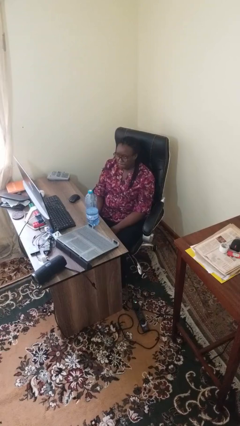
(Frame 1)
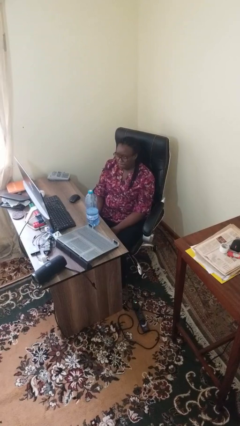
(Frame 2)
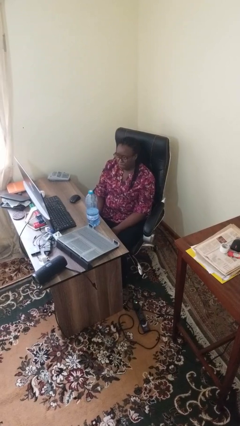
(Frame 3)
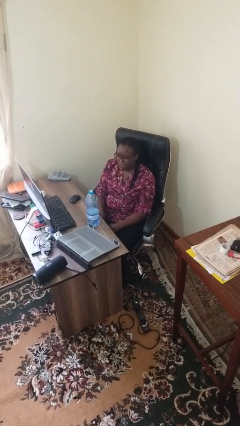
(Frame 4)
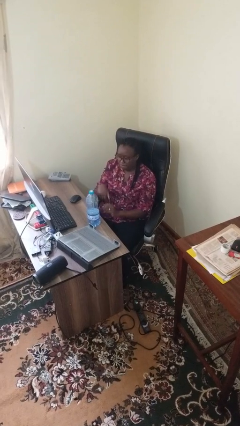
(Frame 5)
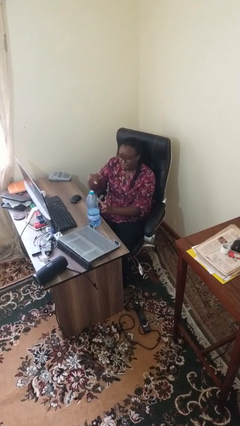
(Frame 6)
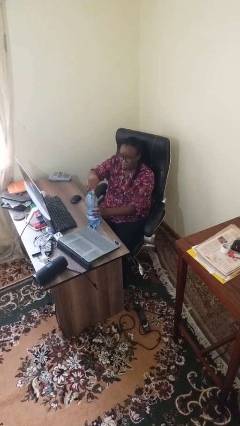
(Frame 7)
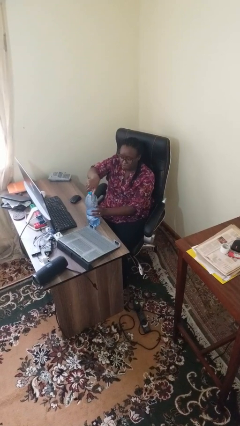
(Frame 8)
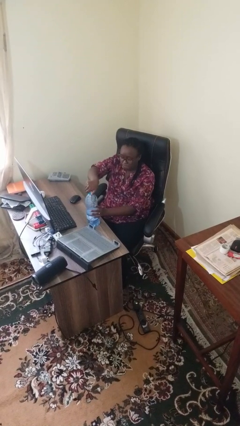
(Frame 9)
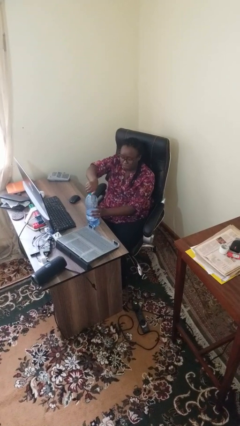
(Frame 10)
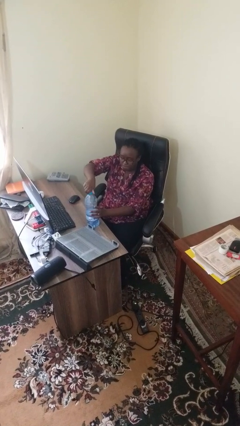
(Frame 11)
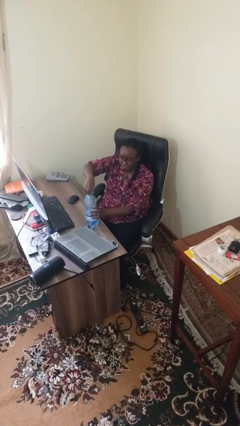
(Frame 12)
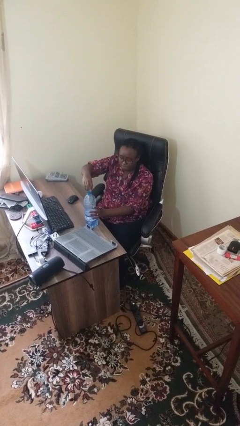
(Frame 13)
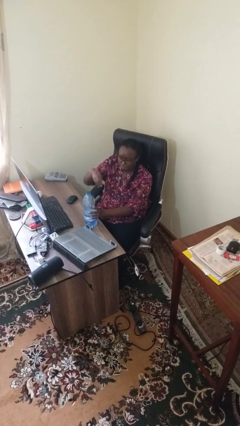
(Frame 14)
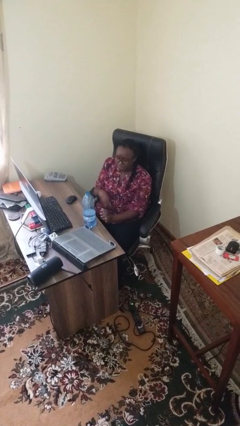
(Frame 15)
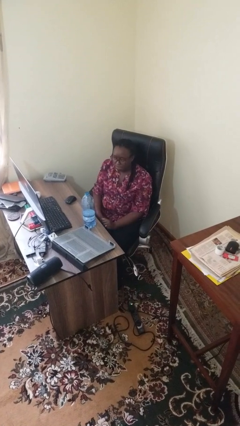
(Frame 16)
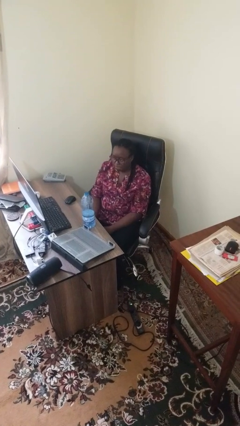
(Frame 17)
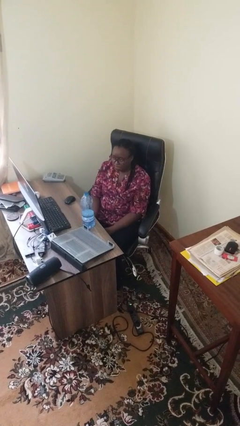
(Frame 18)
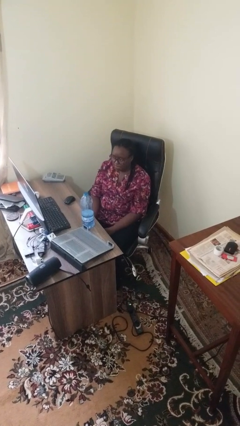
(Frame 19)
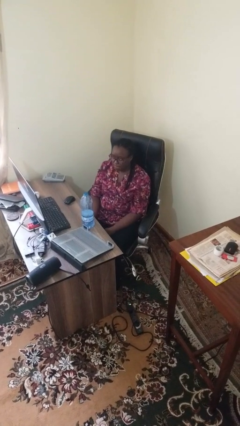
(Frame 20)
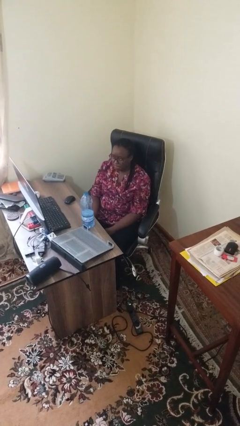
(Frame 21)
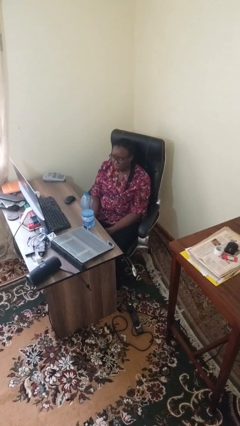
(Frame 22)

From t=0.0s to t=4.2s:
person unscrews lid from bottle

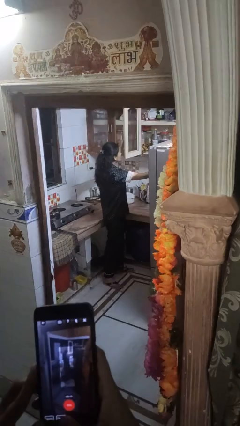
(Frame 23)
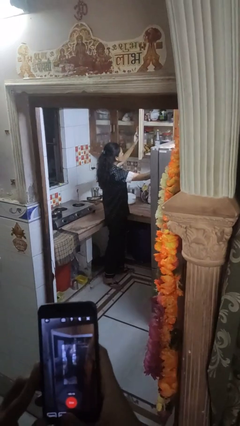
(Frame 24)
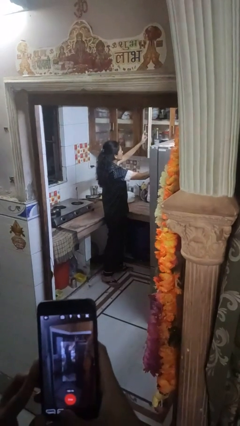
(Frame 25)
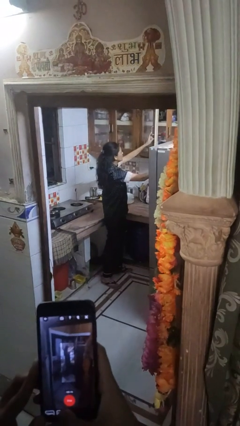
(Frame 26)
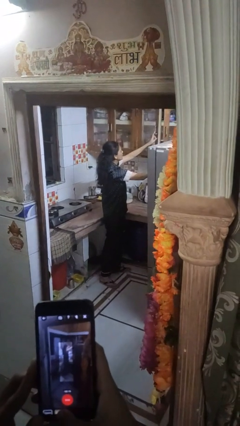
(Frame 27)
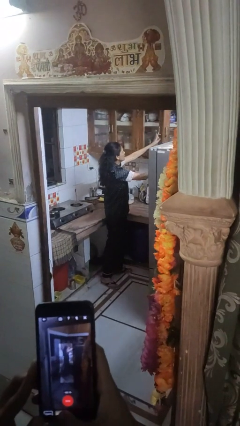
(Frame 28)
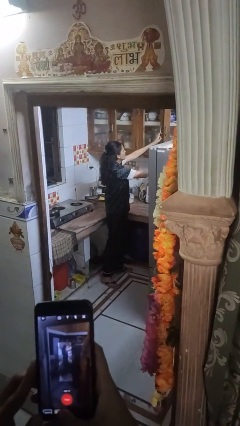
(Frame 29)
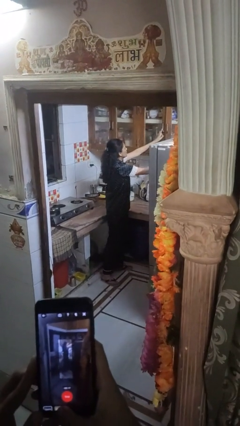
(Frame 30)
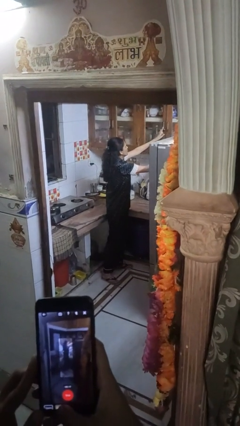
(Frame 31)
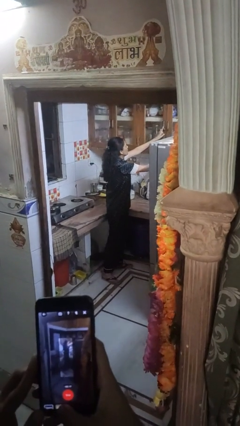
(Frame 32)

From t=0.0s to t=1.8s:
person closes cabinet

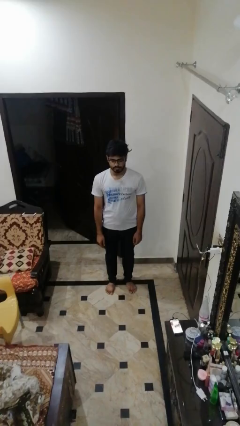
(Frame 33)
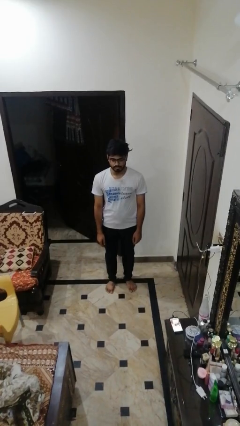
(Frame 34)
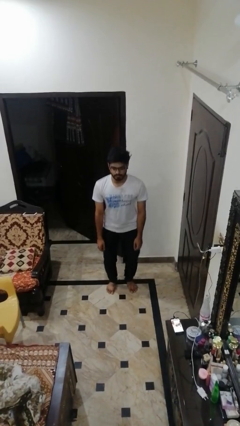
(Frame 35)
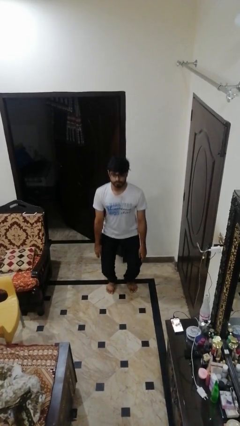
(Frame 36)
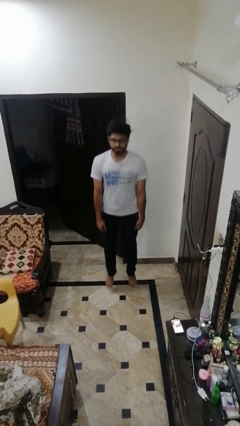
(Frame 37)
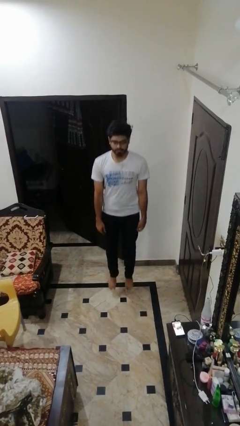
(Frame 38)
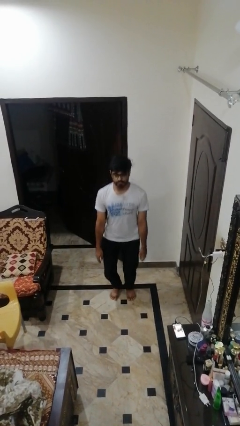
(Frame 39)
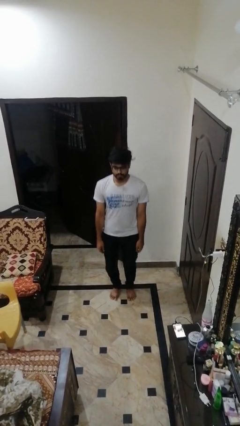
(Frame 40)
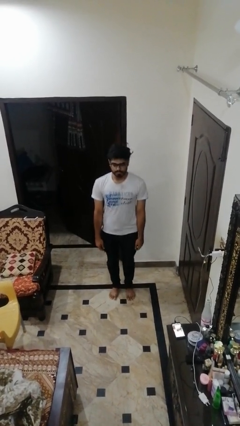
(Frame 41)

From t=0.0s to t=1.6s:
person jumps

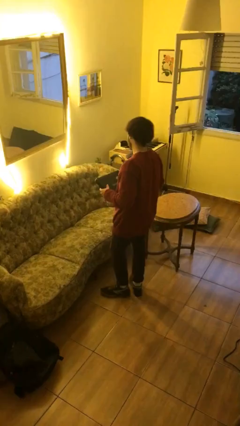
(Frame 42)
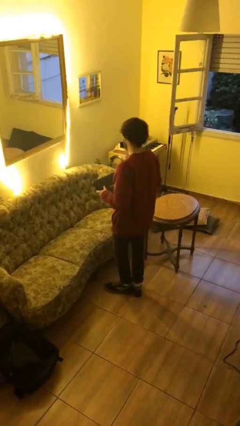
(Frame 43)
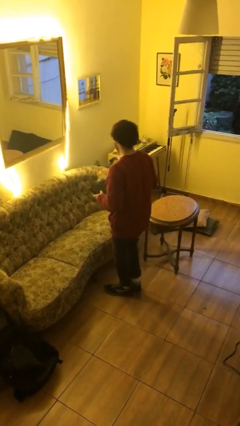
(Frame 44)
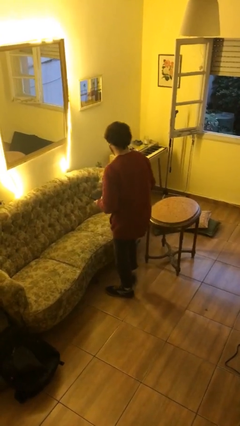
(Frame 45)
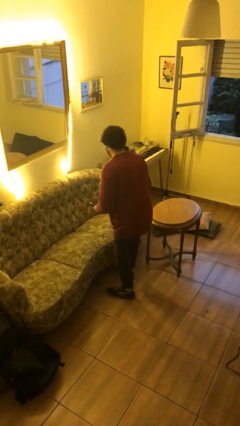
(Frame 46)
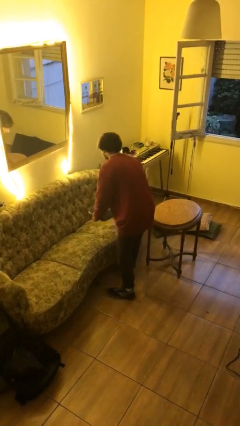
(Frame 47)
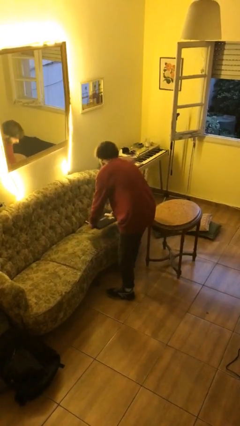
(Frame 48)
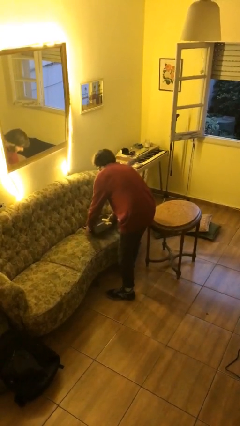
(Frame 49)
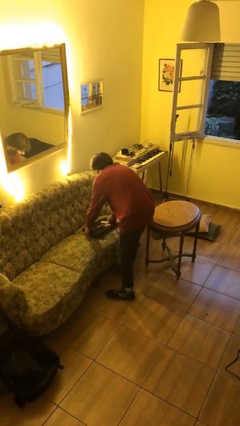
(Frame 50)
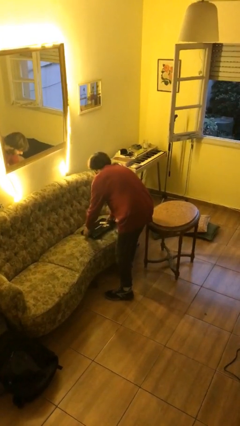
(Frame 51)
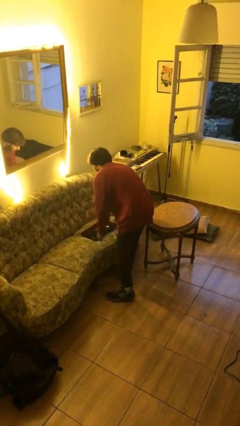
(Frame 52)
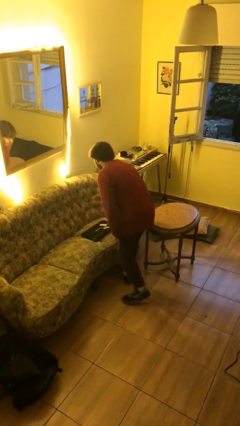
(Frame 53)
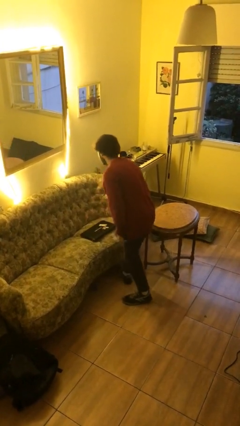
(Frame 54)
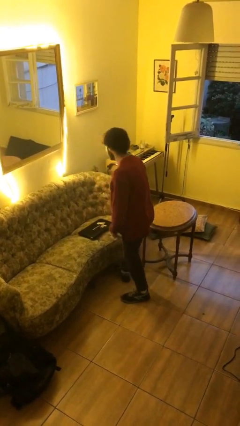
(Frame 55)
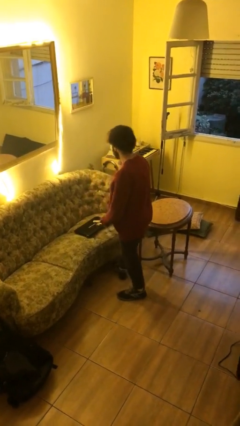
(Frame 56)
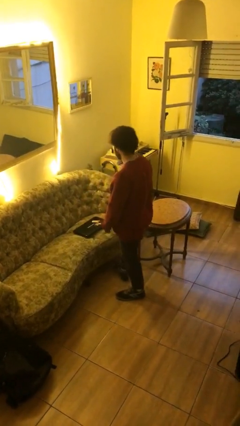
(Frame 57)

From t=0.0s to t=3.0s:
person puts down object on couch

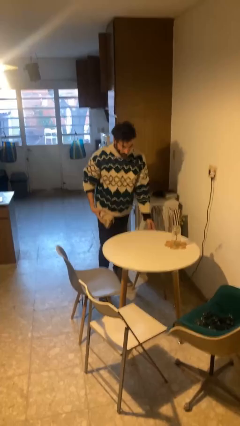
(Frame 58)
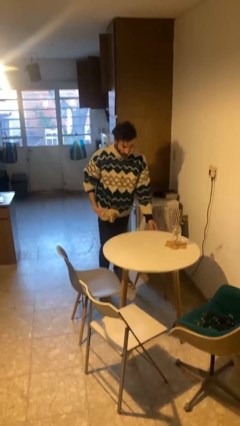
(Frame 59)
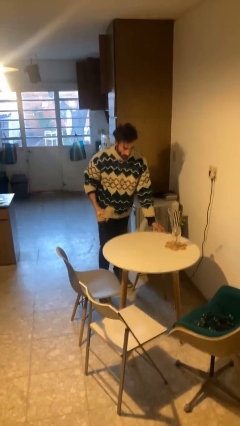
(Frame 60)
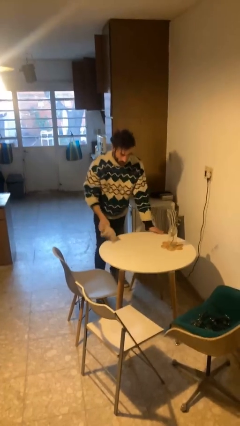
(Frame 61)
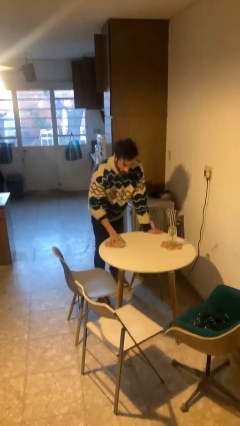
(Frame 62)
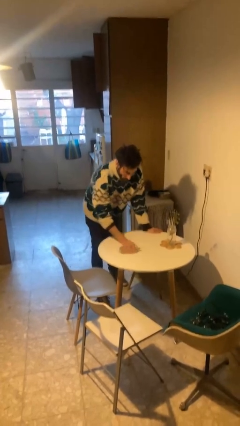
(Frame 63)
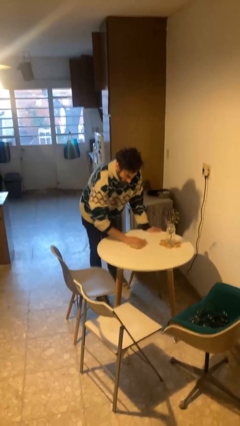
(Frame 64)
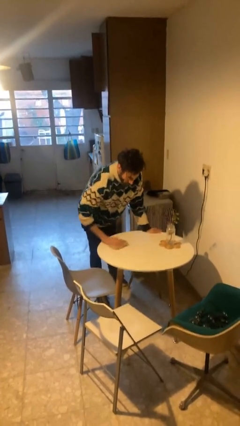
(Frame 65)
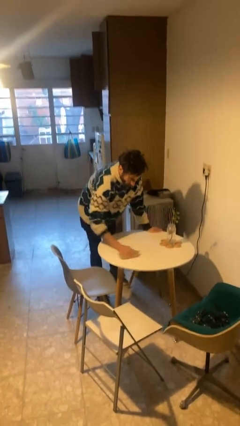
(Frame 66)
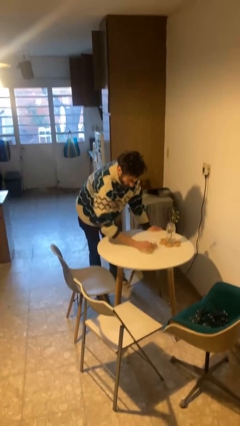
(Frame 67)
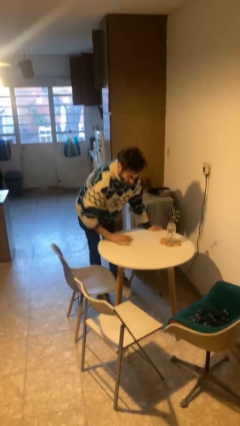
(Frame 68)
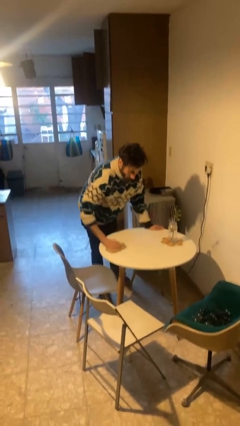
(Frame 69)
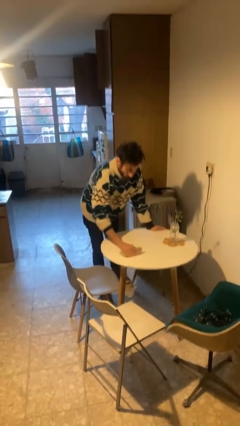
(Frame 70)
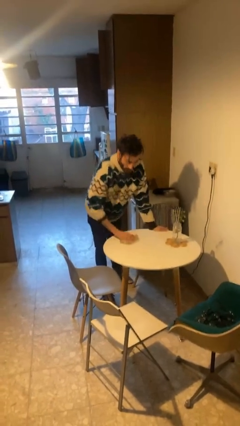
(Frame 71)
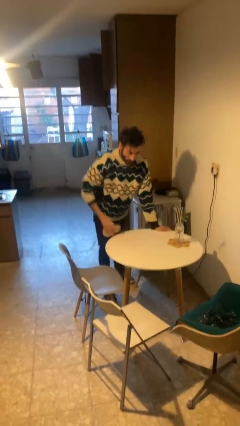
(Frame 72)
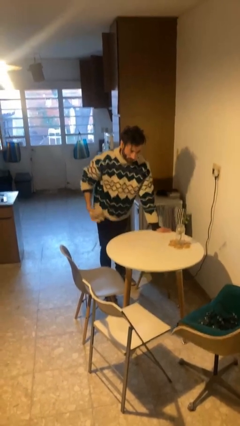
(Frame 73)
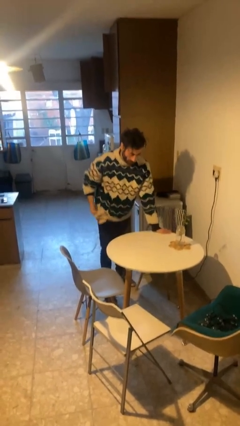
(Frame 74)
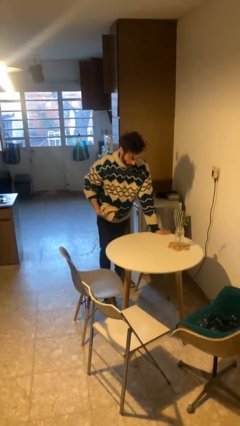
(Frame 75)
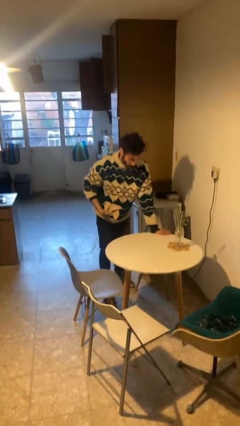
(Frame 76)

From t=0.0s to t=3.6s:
person cleans table with rag

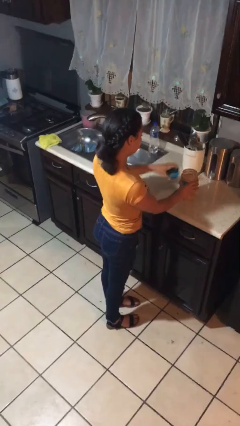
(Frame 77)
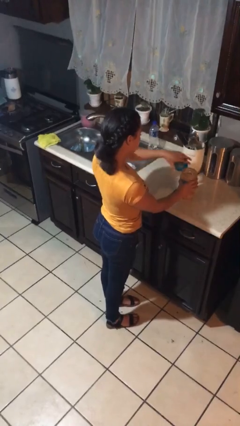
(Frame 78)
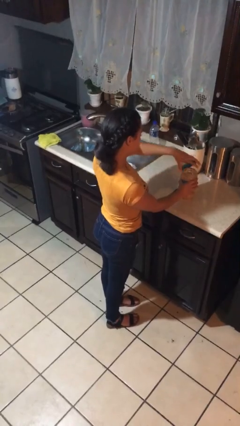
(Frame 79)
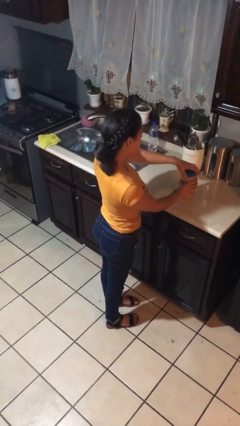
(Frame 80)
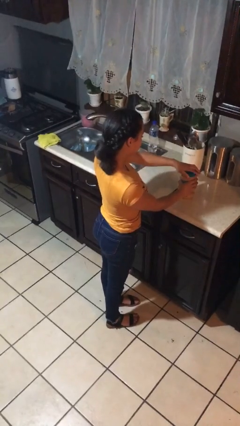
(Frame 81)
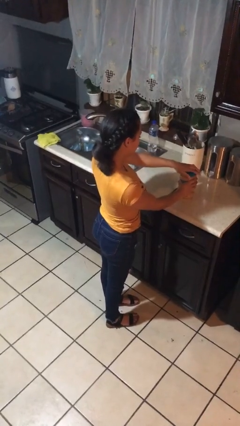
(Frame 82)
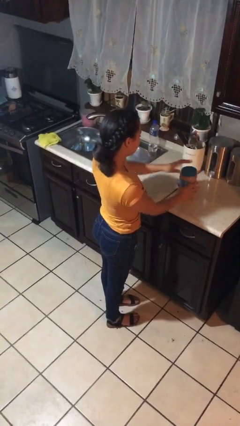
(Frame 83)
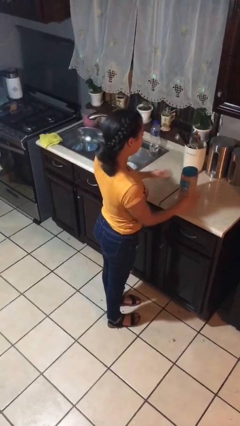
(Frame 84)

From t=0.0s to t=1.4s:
person closes jar

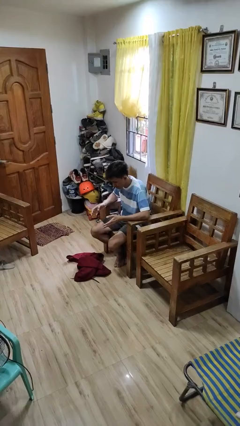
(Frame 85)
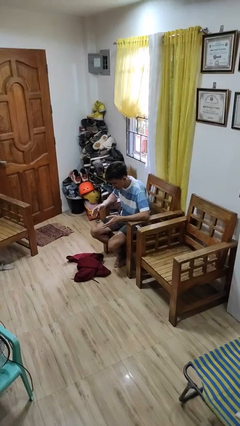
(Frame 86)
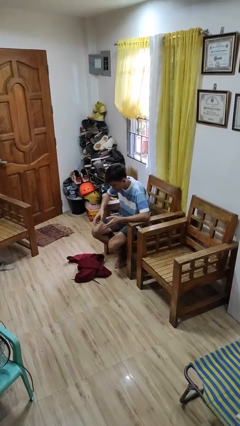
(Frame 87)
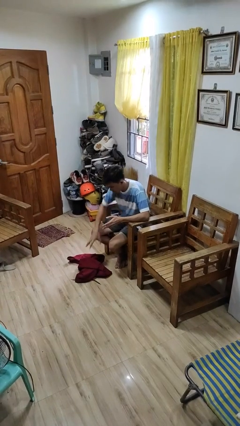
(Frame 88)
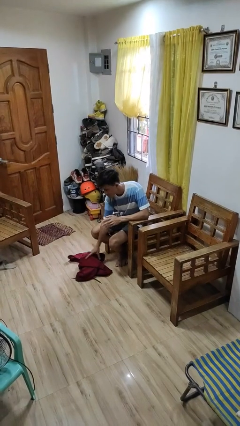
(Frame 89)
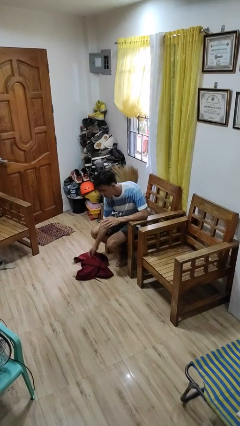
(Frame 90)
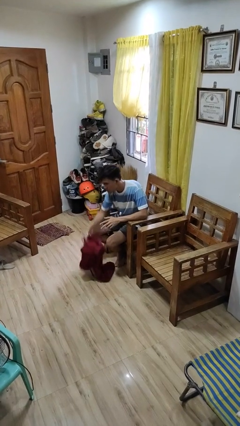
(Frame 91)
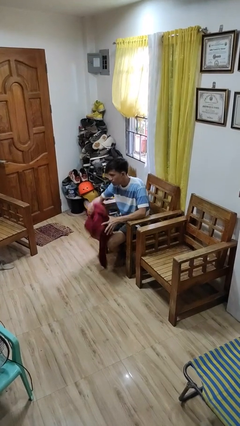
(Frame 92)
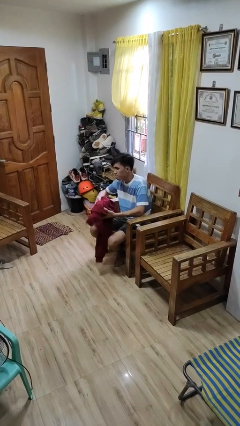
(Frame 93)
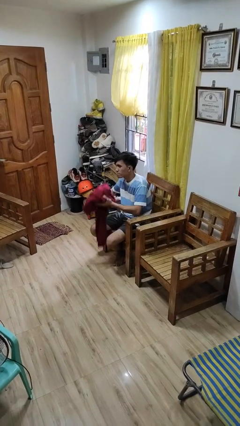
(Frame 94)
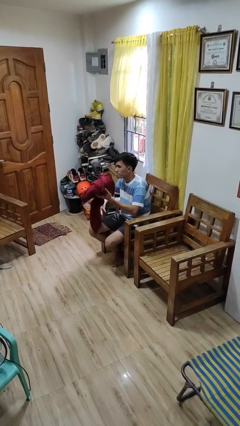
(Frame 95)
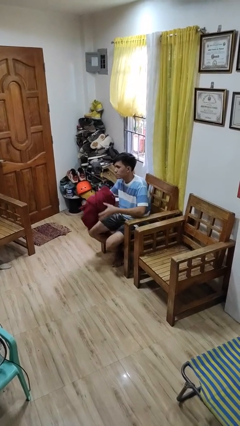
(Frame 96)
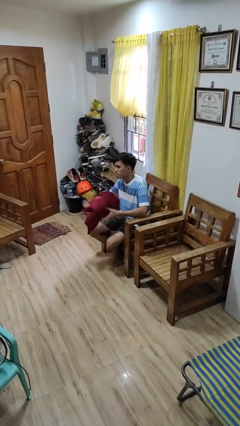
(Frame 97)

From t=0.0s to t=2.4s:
person picks up object from floor
